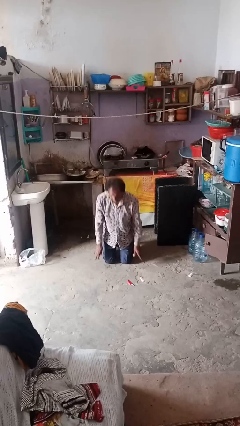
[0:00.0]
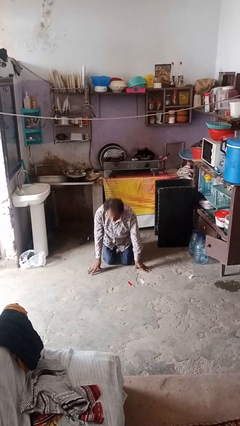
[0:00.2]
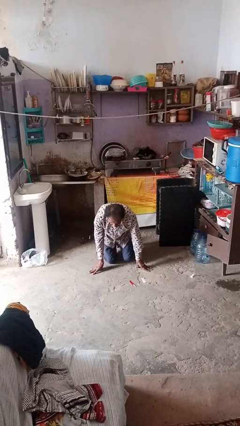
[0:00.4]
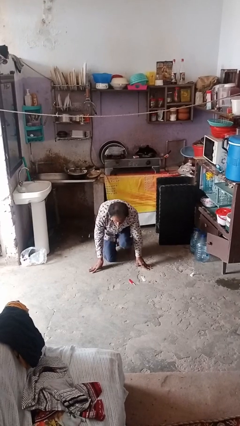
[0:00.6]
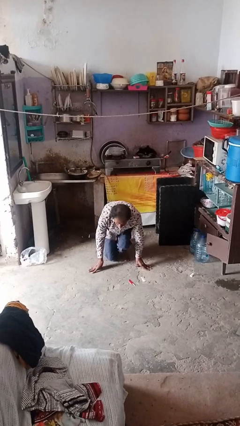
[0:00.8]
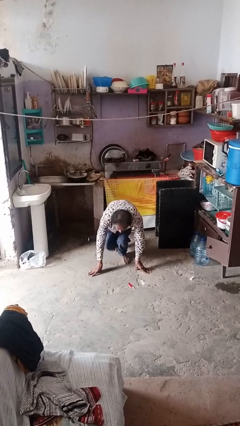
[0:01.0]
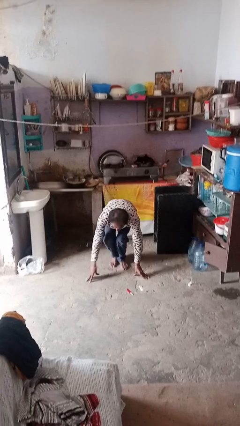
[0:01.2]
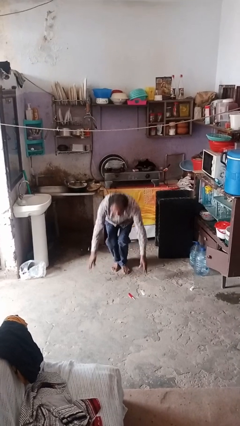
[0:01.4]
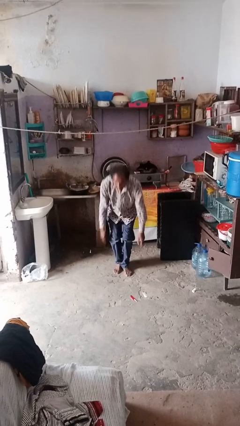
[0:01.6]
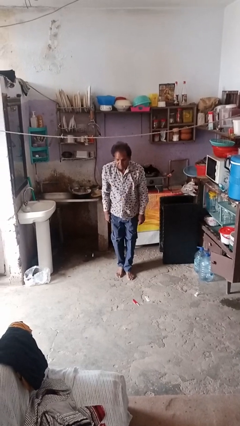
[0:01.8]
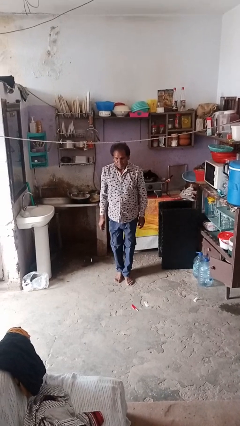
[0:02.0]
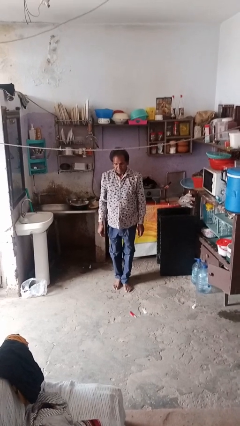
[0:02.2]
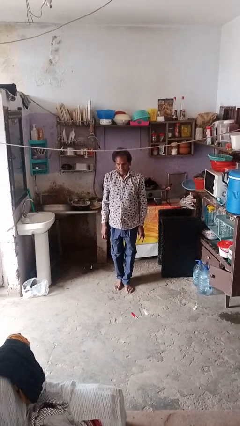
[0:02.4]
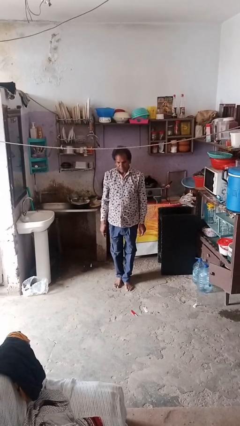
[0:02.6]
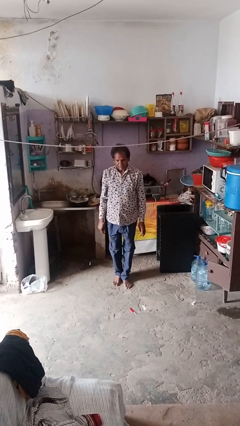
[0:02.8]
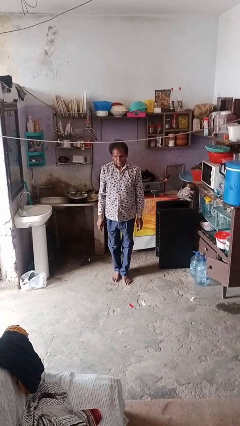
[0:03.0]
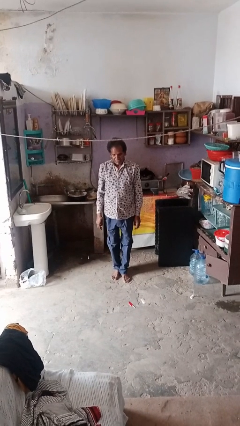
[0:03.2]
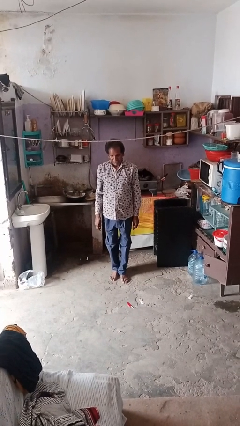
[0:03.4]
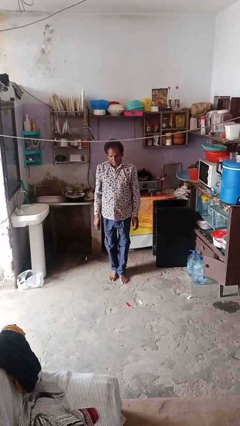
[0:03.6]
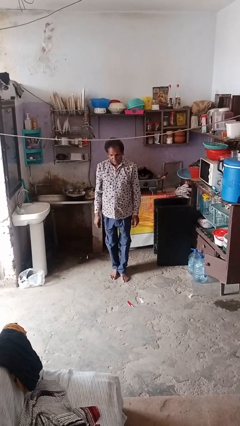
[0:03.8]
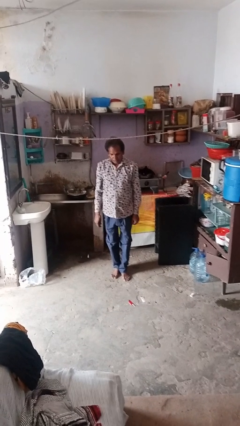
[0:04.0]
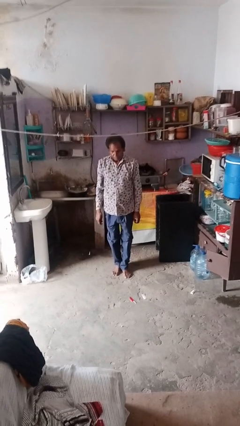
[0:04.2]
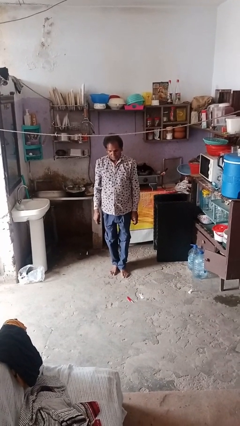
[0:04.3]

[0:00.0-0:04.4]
person stands up from floor

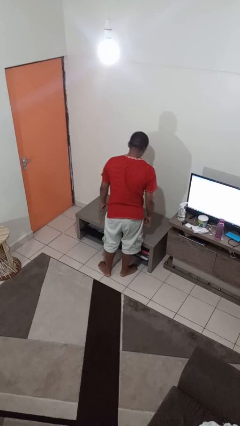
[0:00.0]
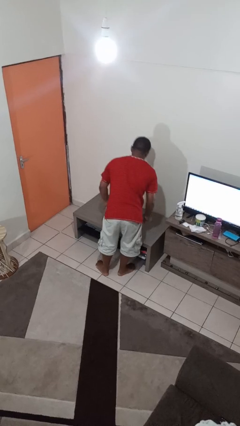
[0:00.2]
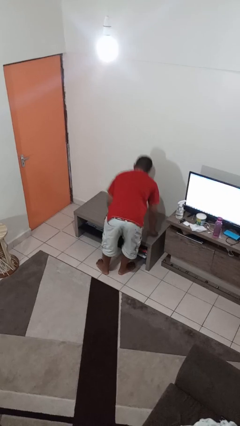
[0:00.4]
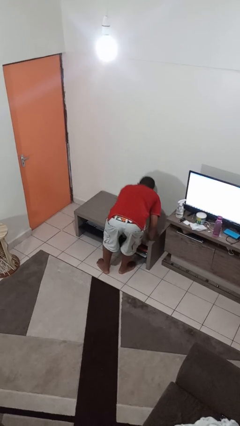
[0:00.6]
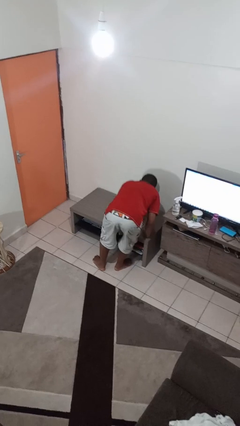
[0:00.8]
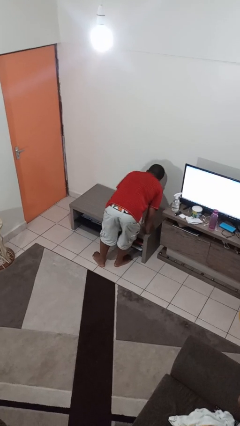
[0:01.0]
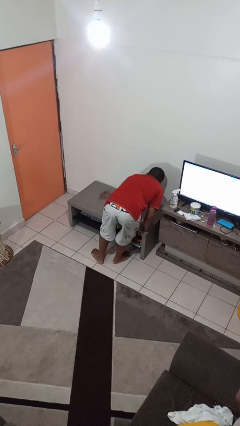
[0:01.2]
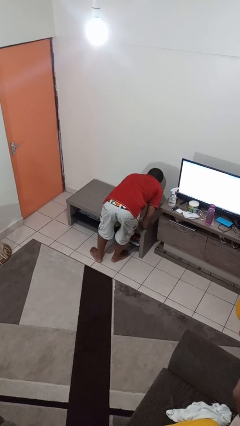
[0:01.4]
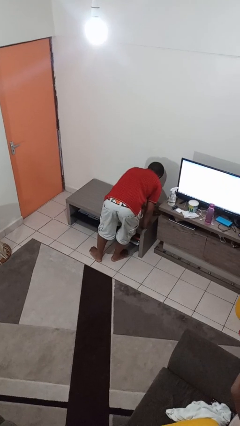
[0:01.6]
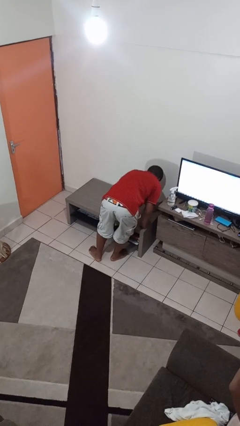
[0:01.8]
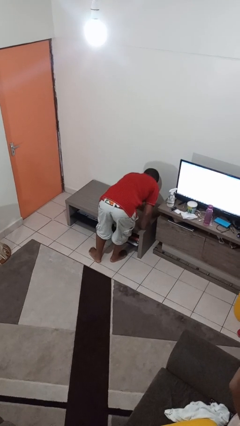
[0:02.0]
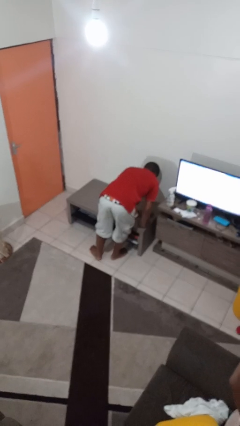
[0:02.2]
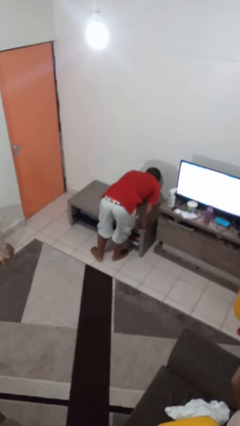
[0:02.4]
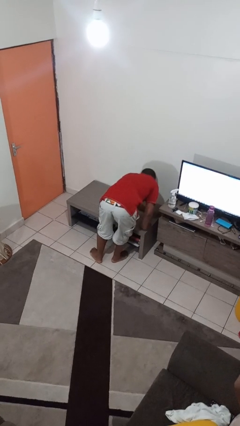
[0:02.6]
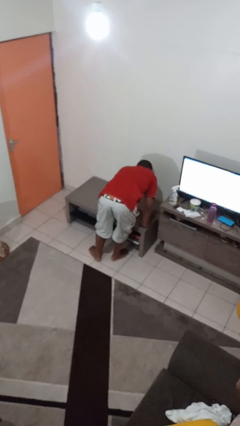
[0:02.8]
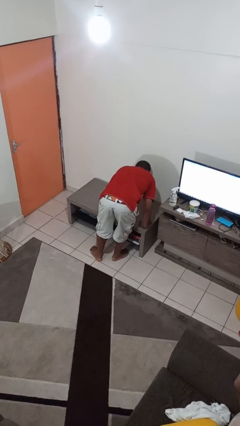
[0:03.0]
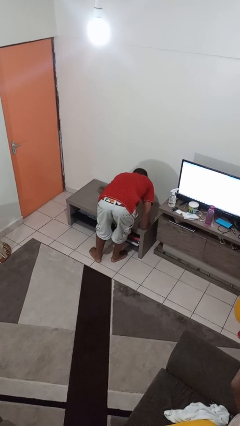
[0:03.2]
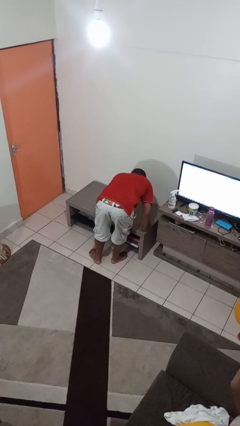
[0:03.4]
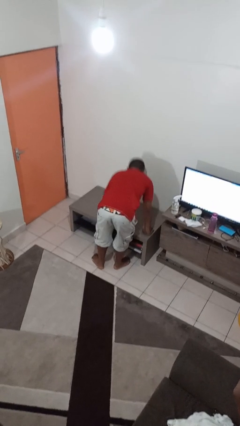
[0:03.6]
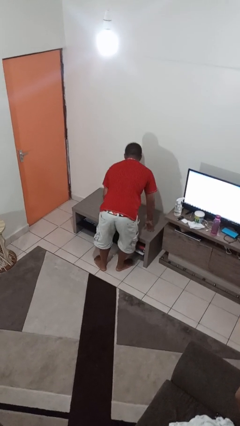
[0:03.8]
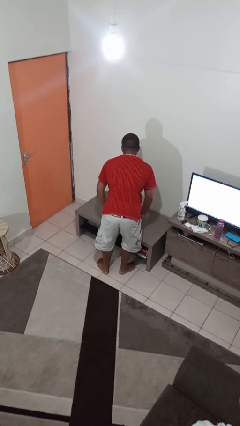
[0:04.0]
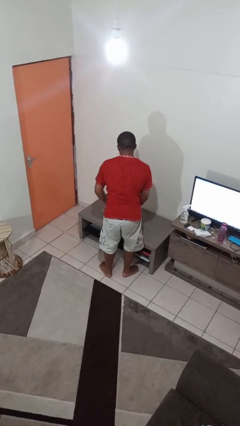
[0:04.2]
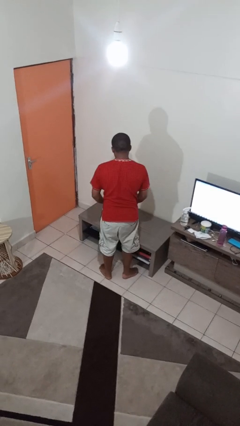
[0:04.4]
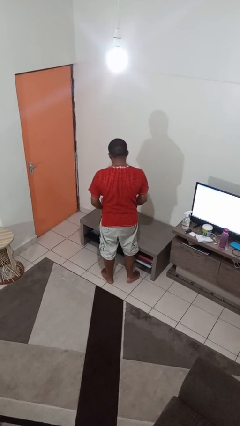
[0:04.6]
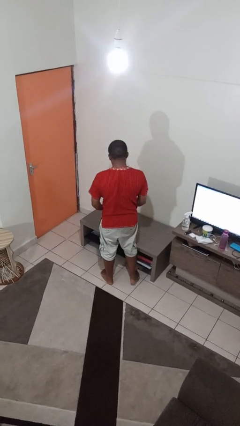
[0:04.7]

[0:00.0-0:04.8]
person cleans table with rag

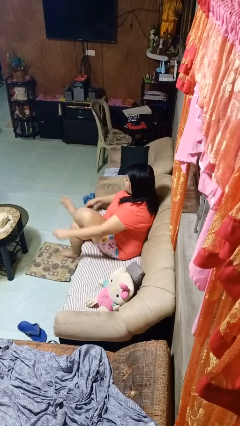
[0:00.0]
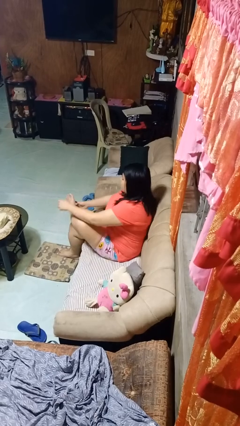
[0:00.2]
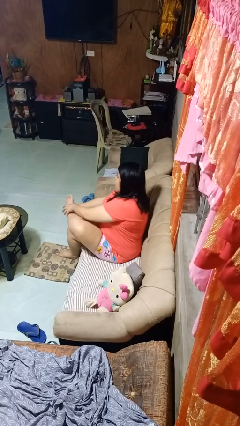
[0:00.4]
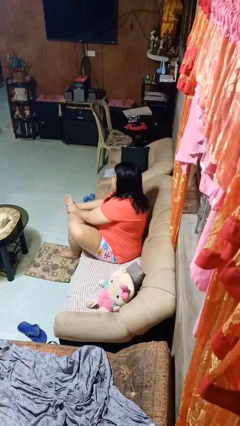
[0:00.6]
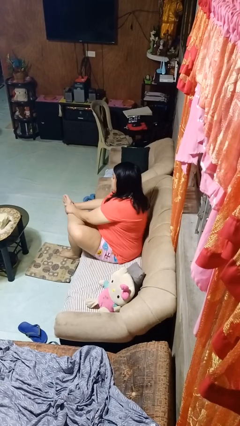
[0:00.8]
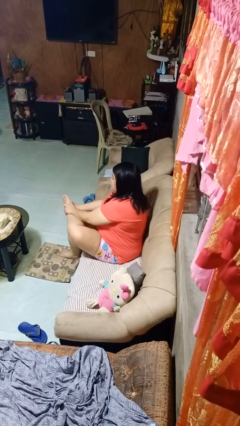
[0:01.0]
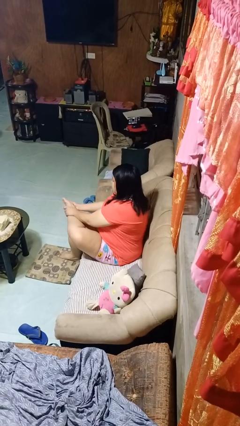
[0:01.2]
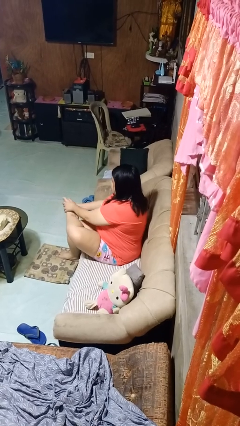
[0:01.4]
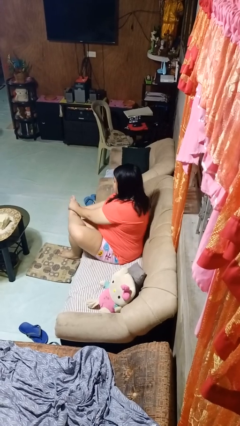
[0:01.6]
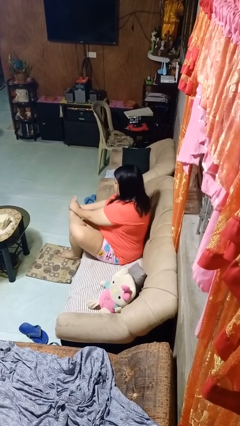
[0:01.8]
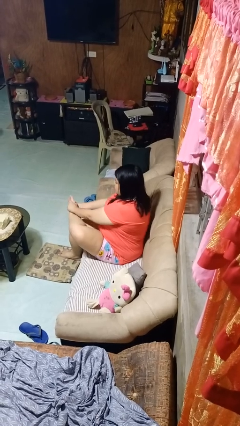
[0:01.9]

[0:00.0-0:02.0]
person rubs foot

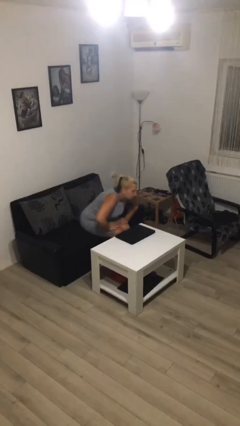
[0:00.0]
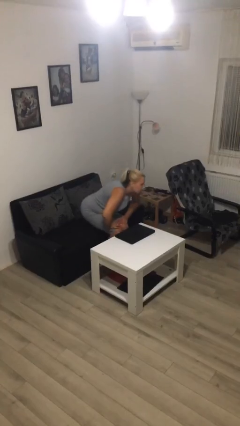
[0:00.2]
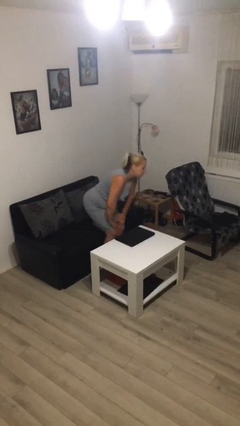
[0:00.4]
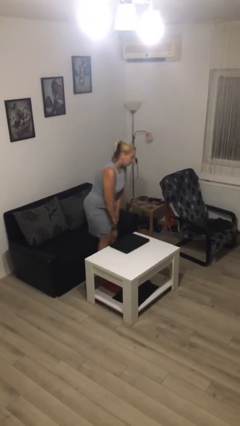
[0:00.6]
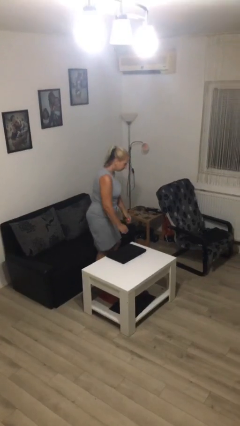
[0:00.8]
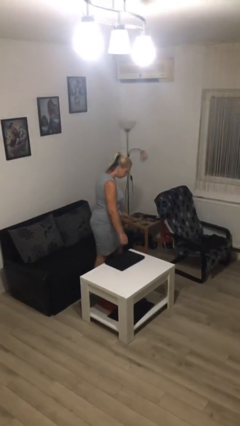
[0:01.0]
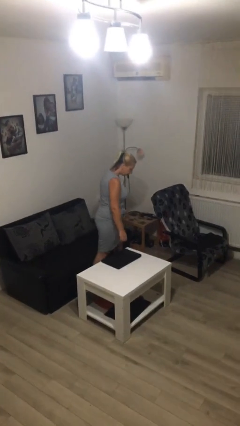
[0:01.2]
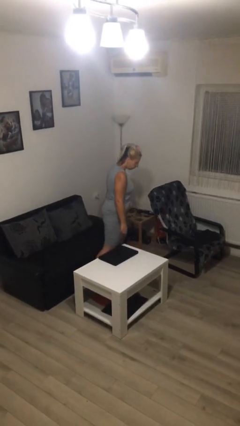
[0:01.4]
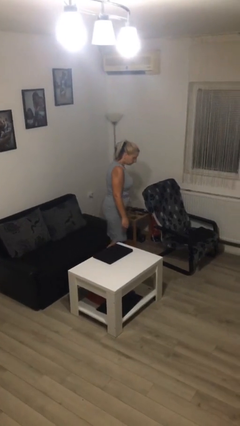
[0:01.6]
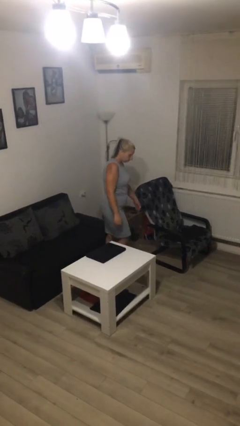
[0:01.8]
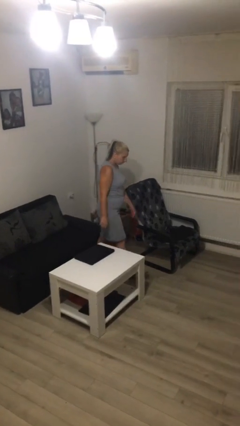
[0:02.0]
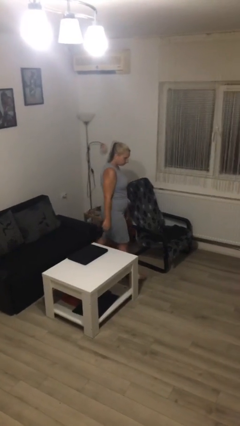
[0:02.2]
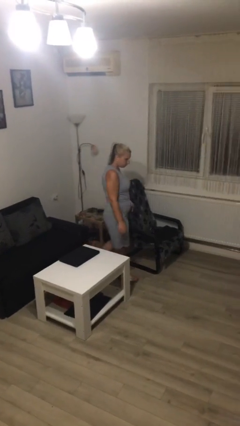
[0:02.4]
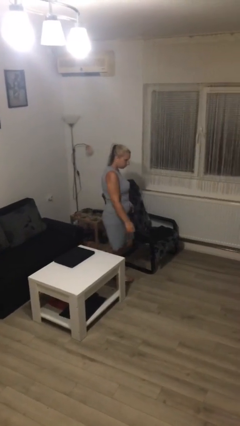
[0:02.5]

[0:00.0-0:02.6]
person stands up

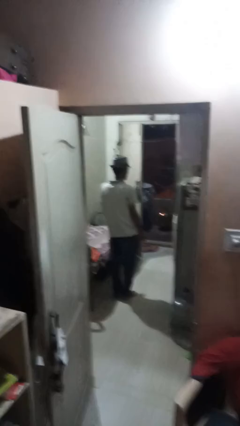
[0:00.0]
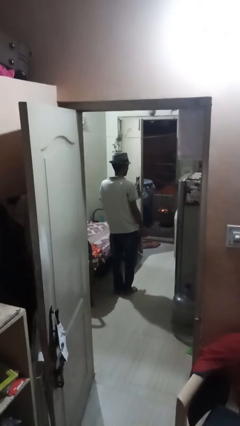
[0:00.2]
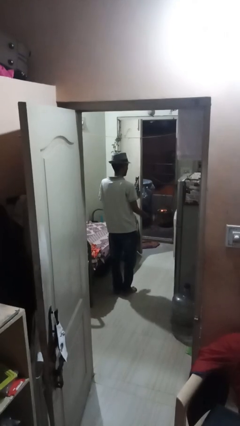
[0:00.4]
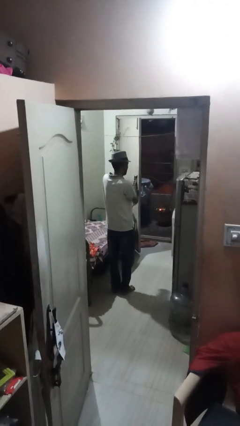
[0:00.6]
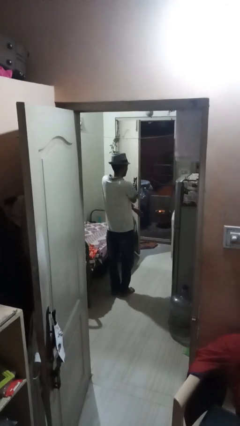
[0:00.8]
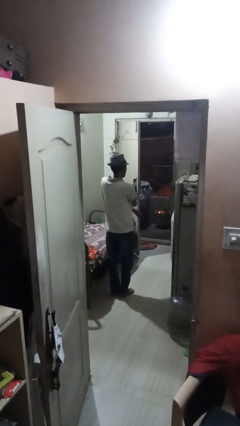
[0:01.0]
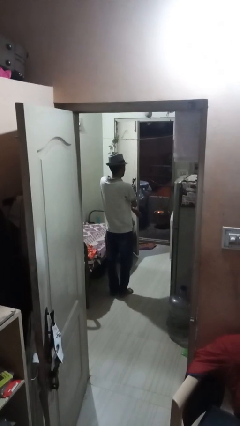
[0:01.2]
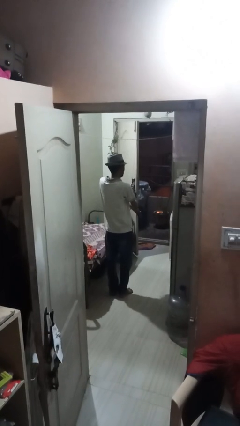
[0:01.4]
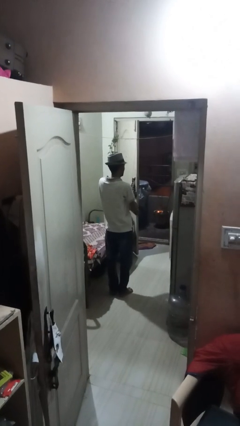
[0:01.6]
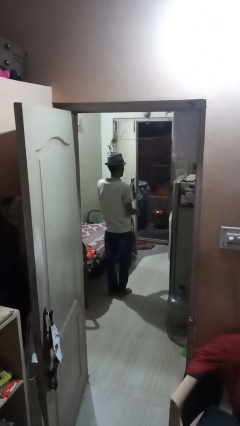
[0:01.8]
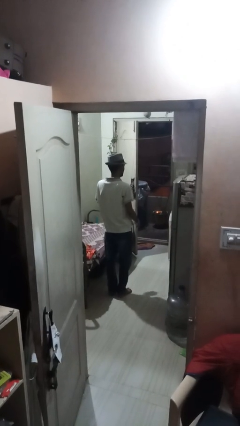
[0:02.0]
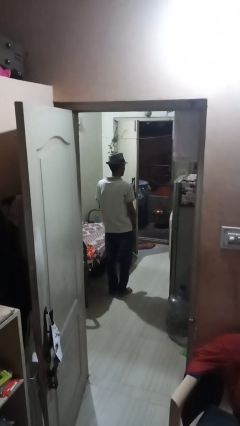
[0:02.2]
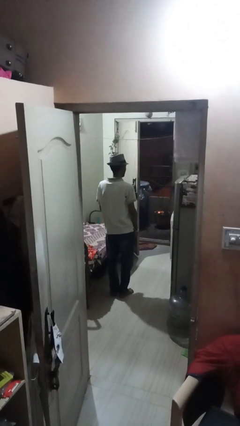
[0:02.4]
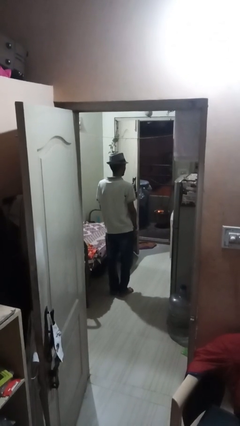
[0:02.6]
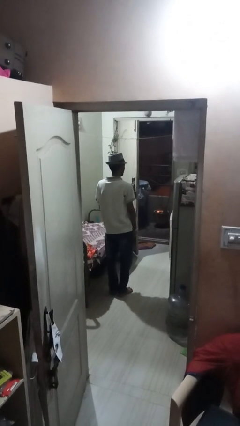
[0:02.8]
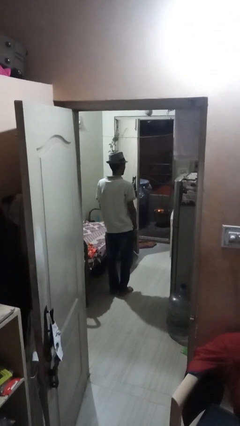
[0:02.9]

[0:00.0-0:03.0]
person swats bug

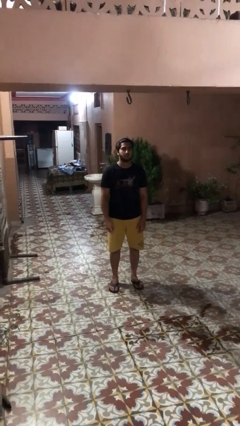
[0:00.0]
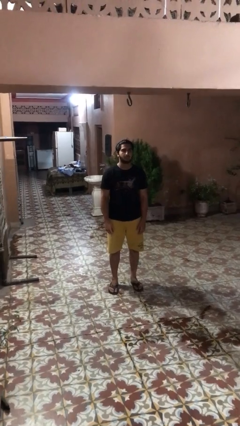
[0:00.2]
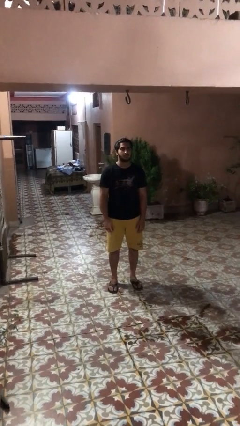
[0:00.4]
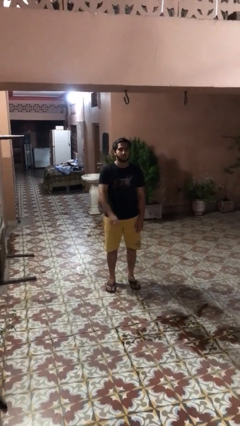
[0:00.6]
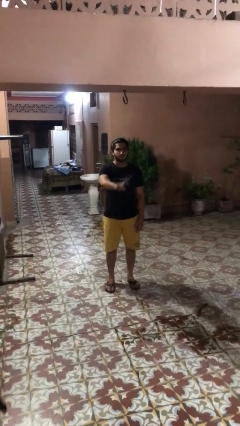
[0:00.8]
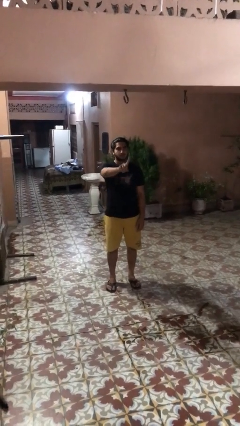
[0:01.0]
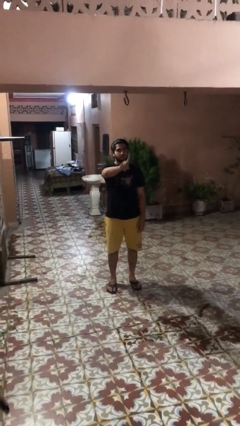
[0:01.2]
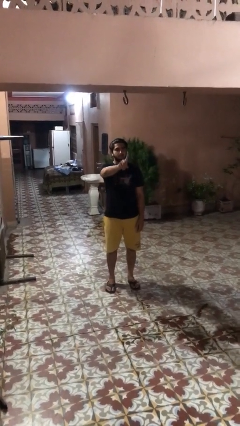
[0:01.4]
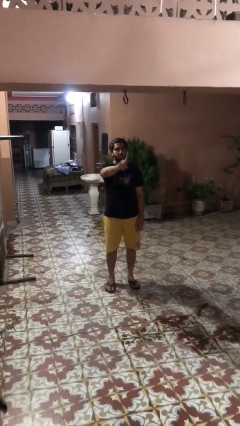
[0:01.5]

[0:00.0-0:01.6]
person gestures number one
